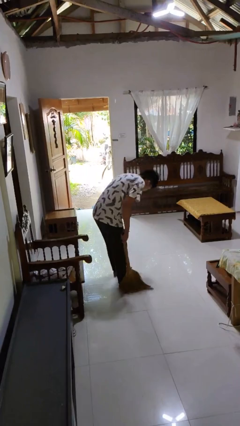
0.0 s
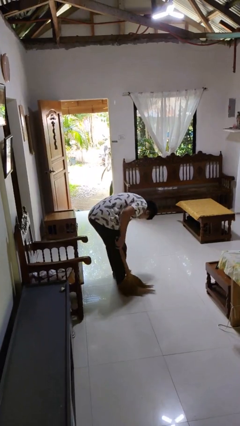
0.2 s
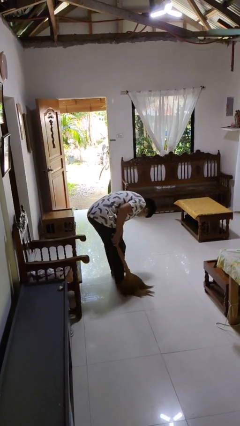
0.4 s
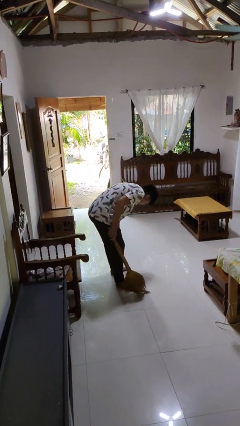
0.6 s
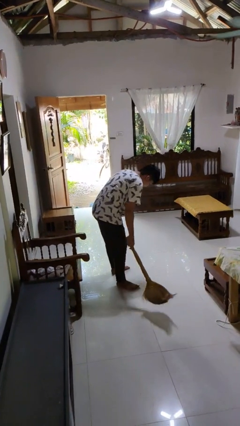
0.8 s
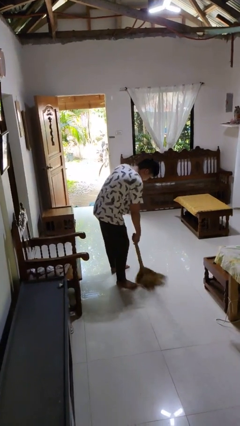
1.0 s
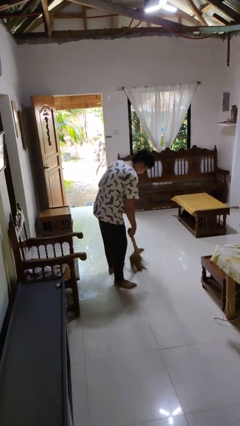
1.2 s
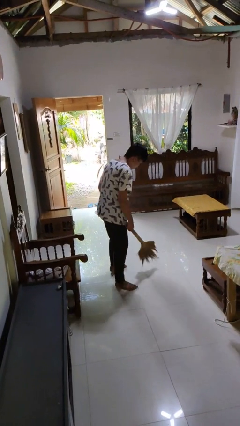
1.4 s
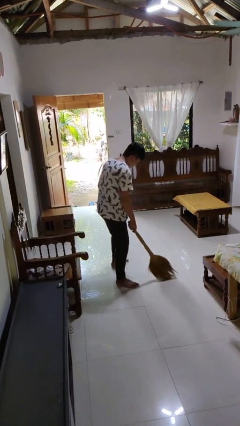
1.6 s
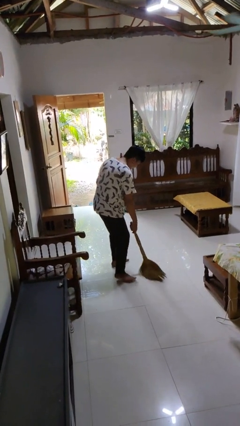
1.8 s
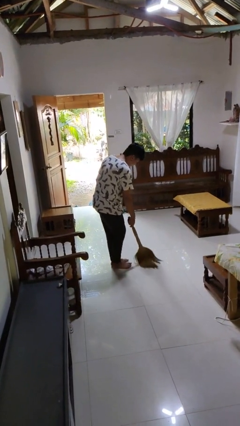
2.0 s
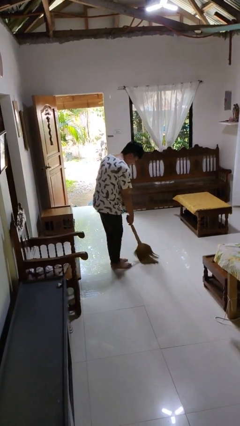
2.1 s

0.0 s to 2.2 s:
person sweeps floor

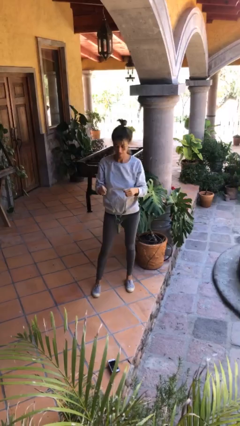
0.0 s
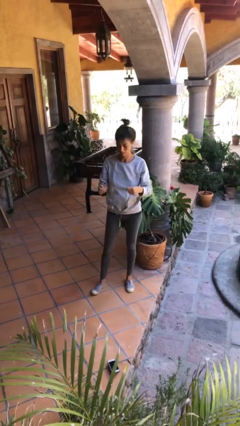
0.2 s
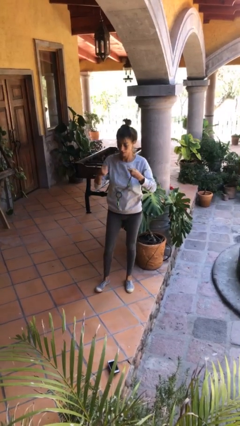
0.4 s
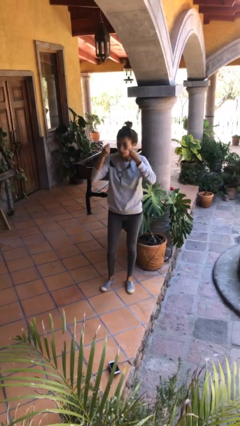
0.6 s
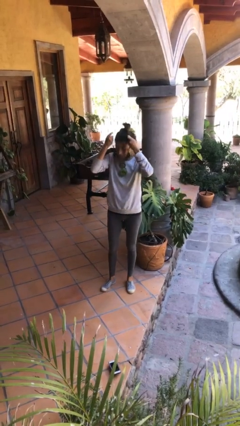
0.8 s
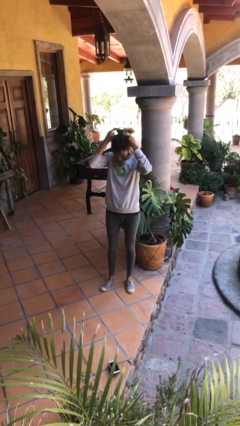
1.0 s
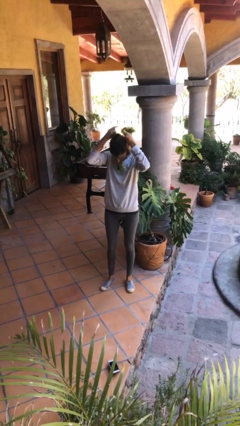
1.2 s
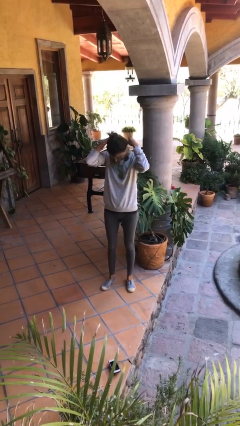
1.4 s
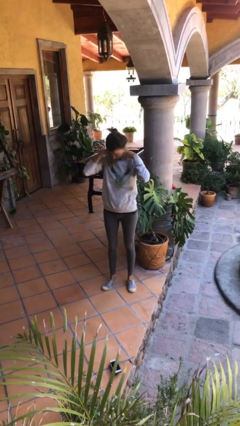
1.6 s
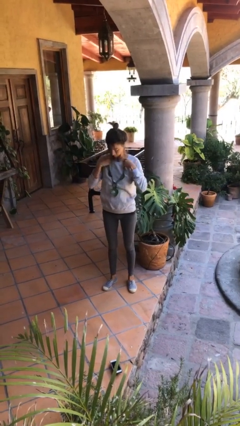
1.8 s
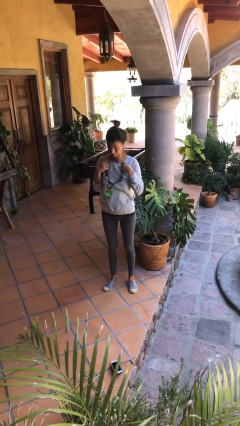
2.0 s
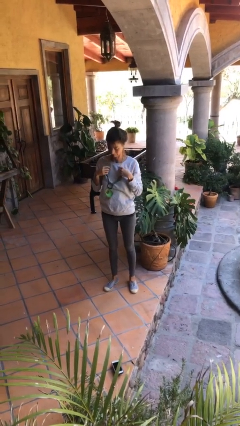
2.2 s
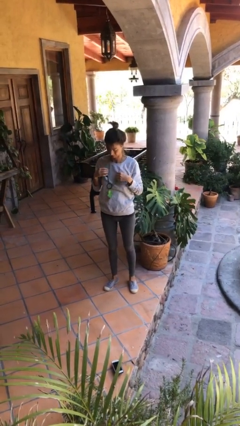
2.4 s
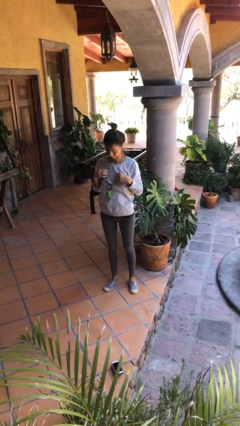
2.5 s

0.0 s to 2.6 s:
person puts on necklace

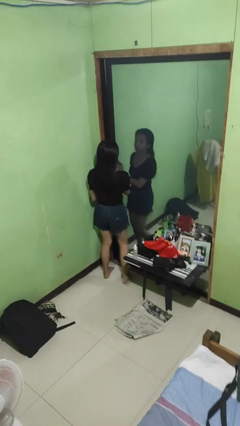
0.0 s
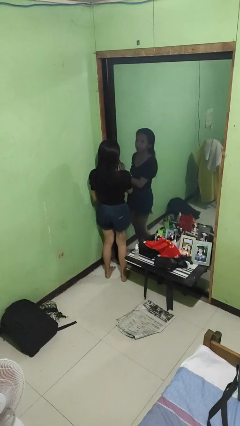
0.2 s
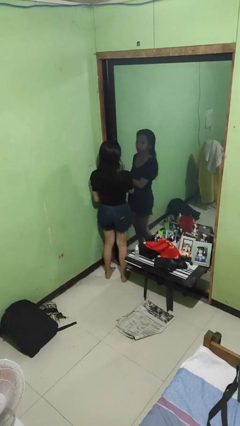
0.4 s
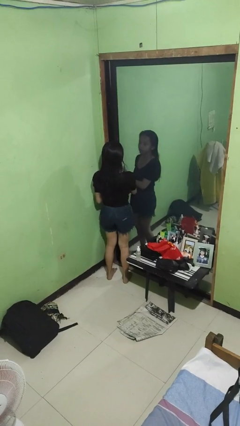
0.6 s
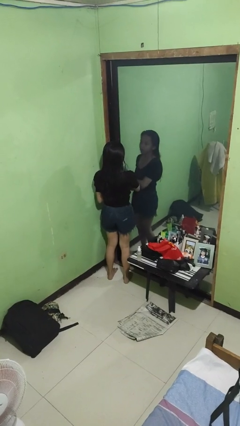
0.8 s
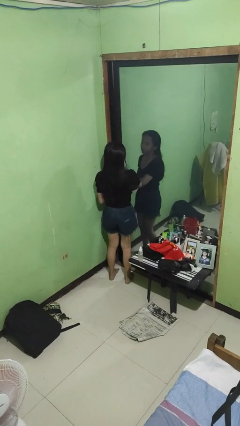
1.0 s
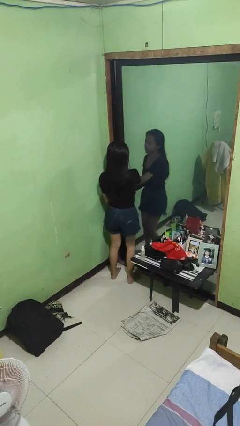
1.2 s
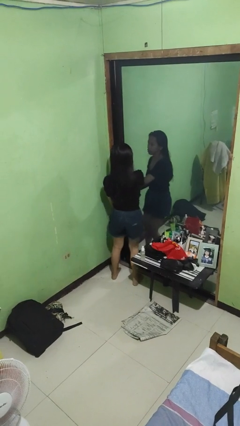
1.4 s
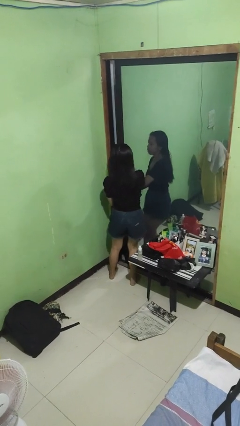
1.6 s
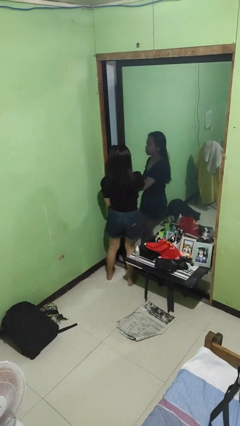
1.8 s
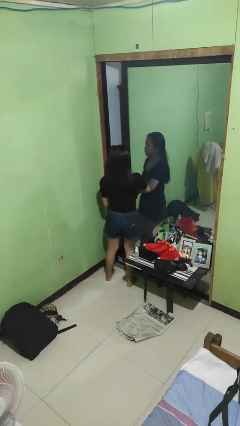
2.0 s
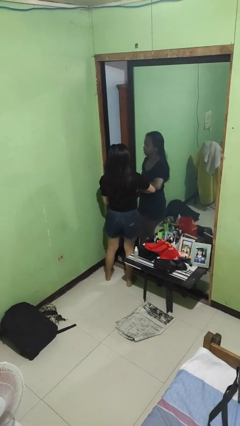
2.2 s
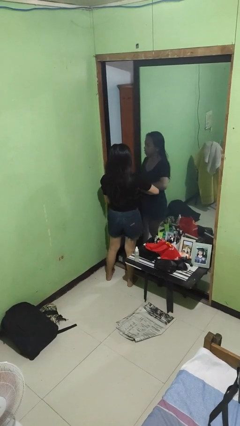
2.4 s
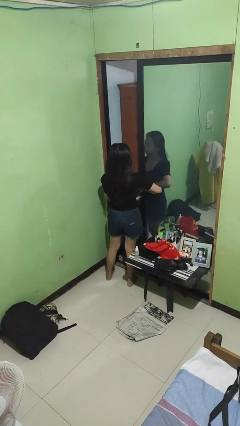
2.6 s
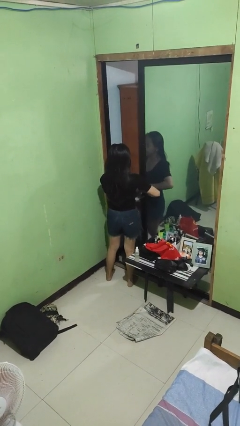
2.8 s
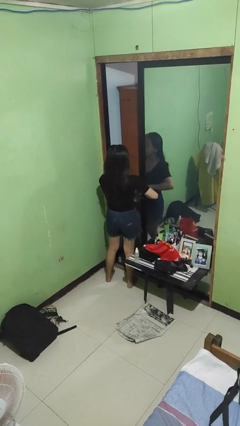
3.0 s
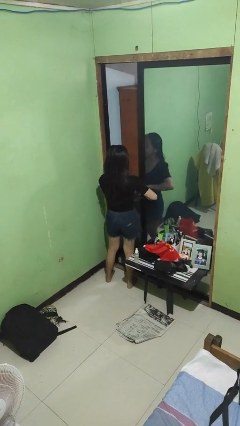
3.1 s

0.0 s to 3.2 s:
person opens sliding door

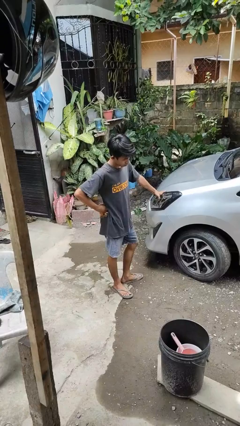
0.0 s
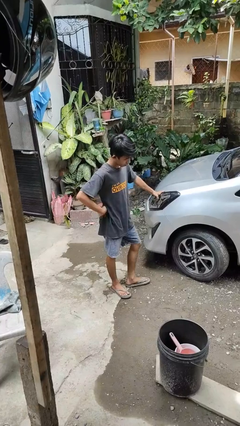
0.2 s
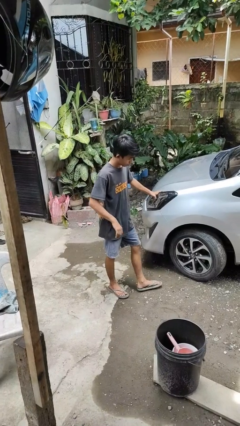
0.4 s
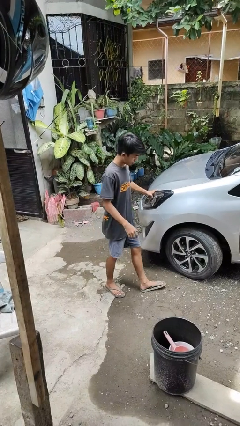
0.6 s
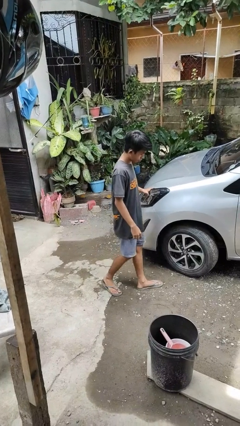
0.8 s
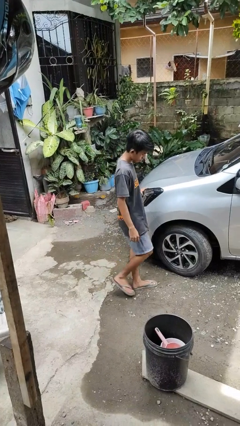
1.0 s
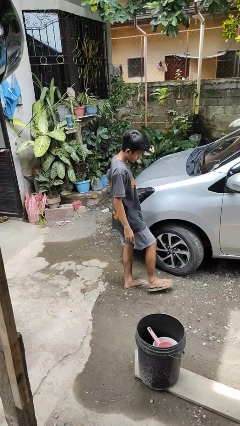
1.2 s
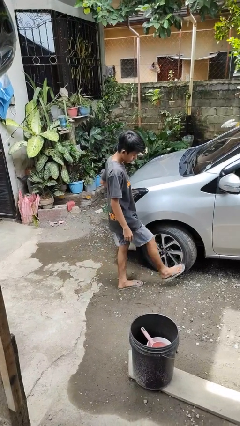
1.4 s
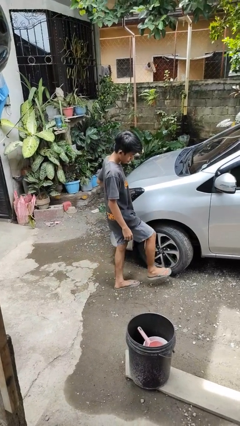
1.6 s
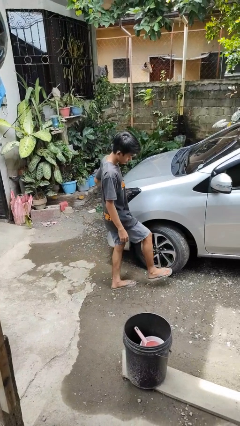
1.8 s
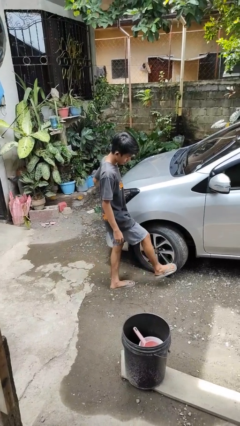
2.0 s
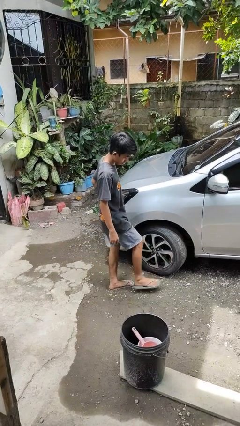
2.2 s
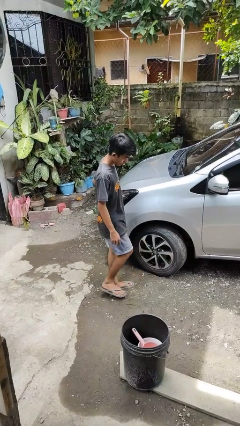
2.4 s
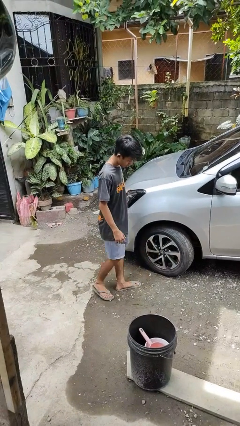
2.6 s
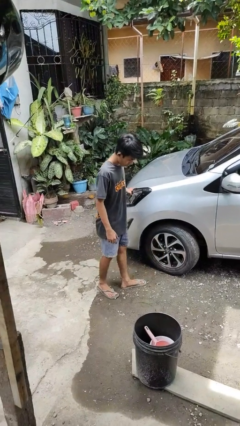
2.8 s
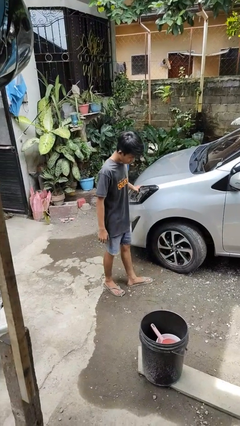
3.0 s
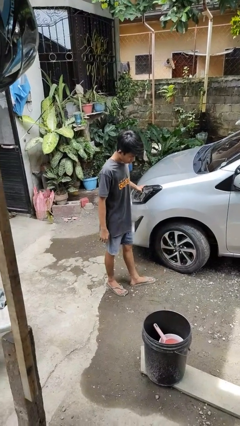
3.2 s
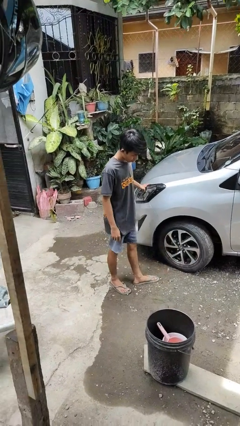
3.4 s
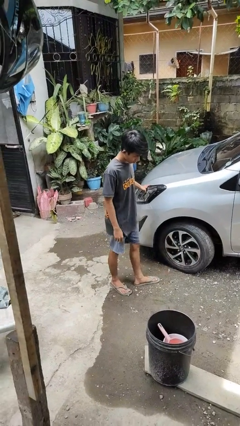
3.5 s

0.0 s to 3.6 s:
person kicks car tires

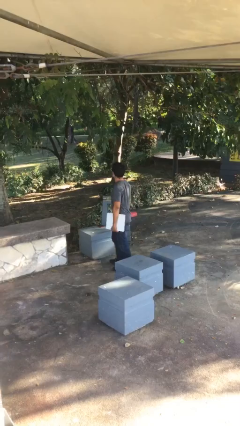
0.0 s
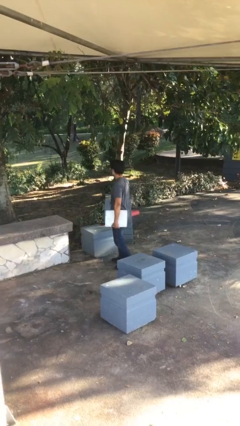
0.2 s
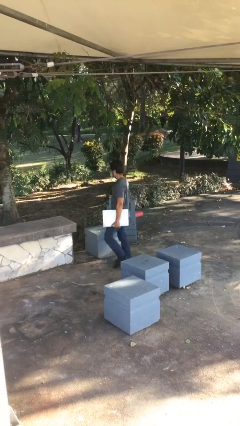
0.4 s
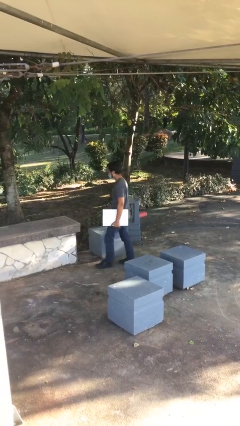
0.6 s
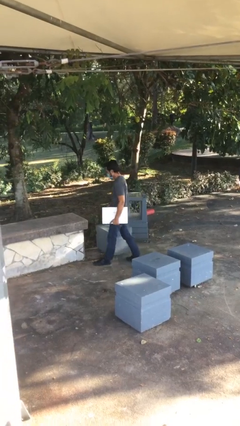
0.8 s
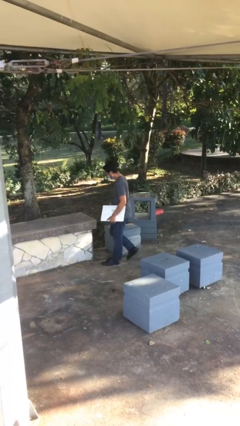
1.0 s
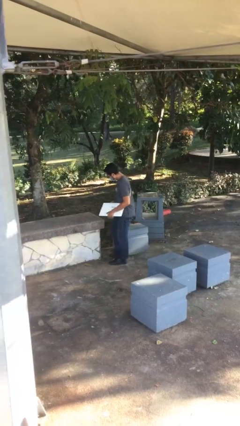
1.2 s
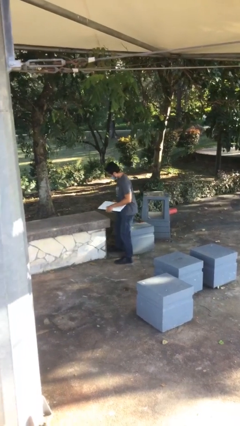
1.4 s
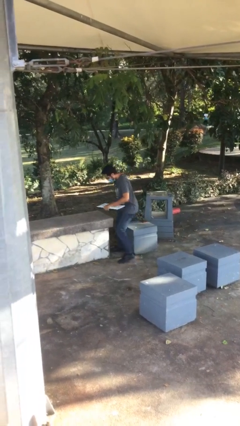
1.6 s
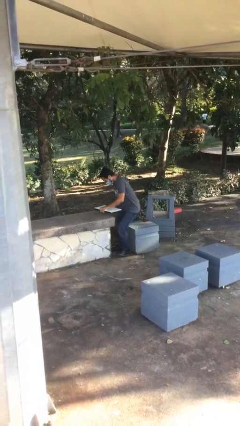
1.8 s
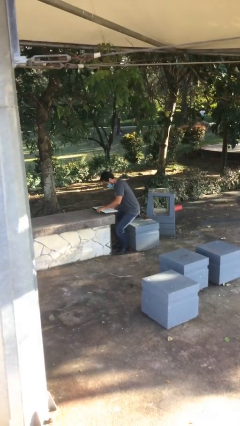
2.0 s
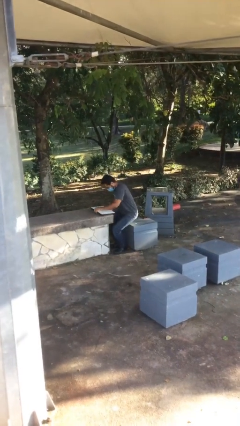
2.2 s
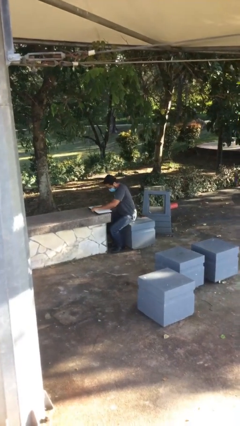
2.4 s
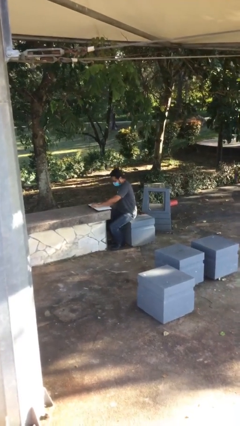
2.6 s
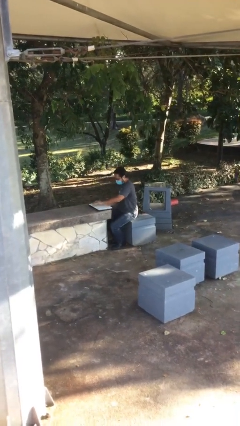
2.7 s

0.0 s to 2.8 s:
person sits down

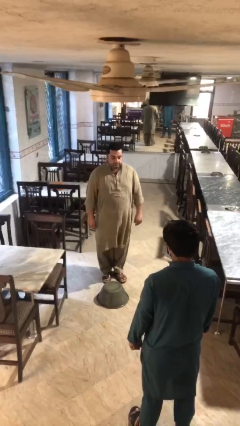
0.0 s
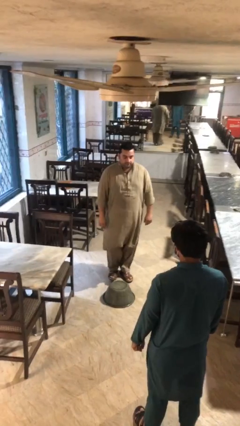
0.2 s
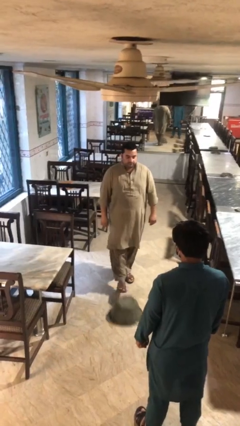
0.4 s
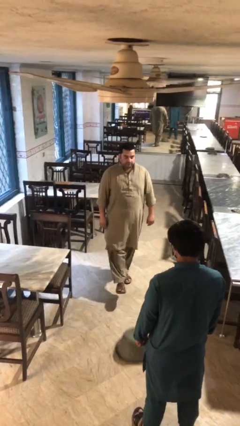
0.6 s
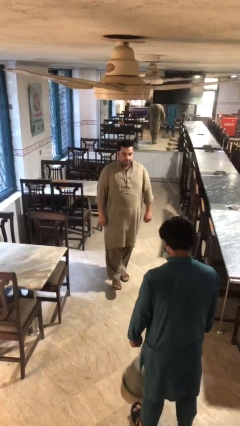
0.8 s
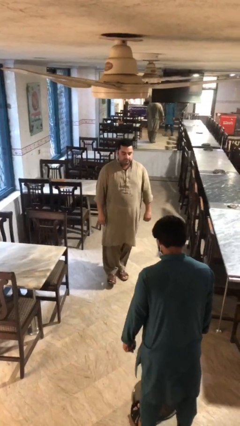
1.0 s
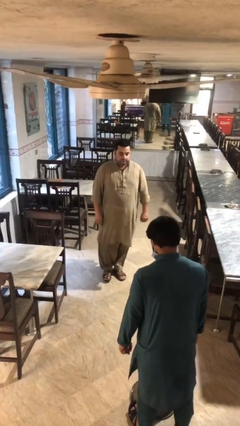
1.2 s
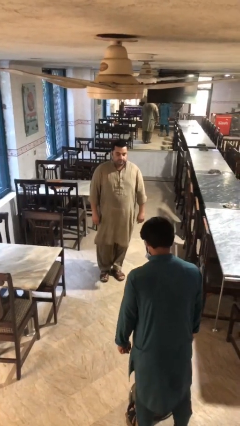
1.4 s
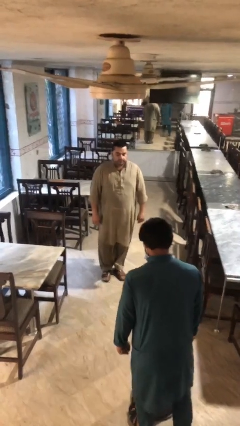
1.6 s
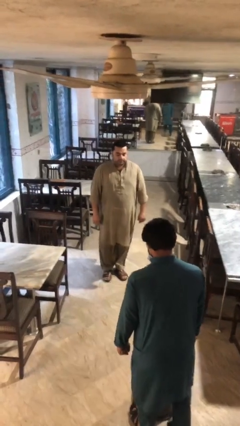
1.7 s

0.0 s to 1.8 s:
person kicks object to person

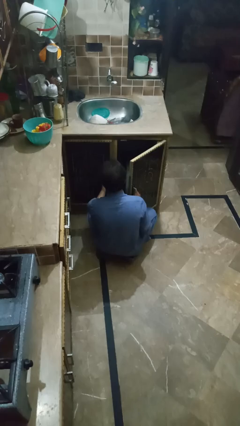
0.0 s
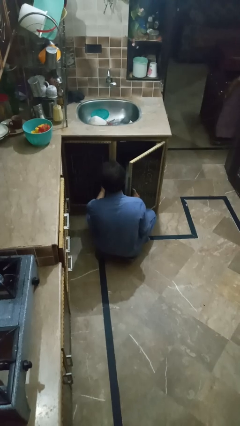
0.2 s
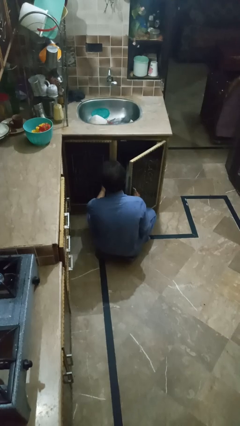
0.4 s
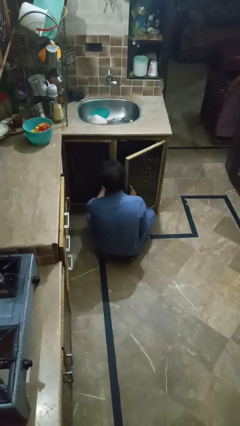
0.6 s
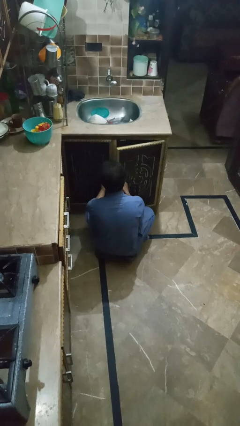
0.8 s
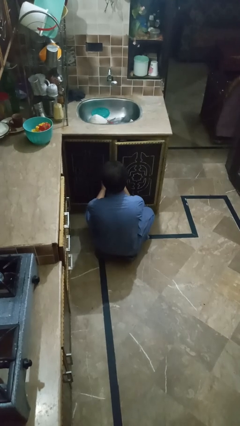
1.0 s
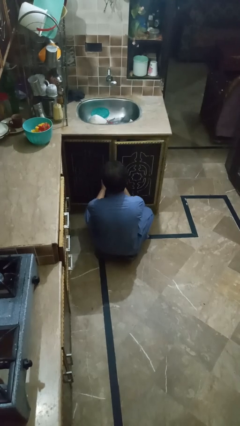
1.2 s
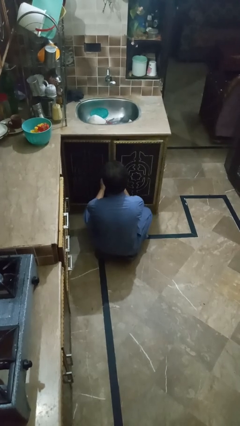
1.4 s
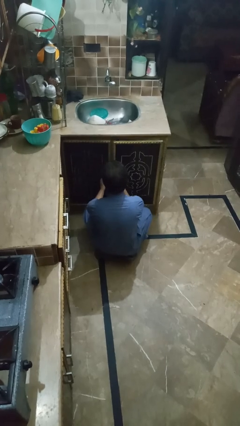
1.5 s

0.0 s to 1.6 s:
person closes kitchen drawer
